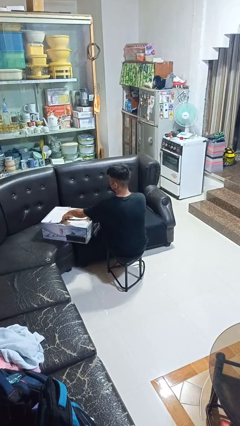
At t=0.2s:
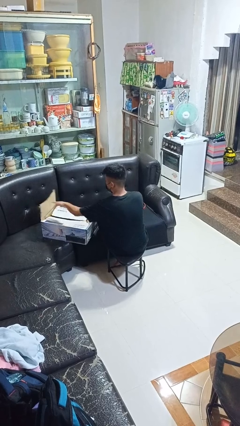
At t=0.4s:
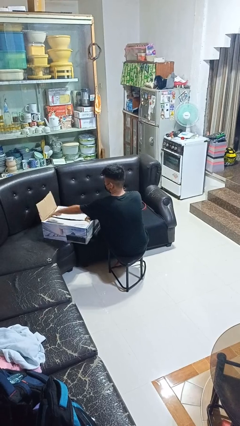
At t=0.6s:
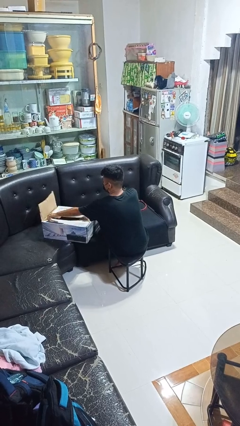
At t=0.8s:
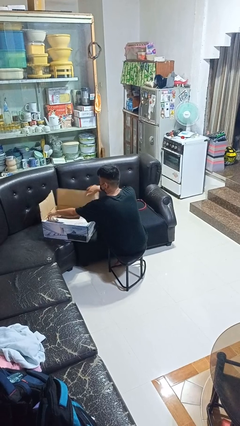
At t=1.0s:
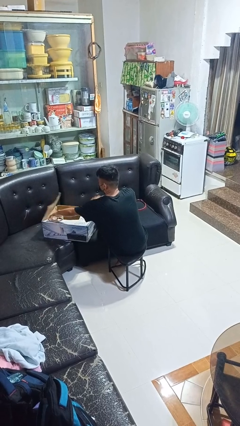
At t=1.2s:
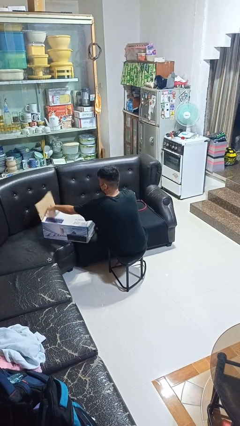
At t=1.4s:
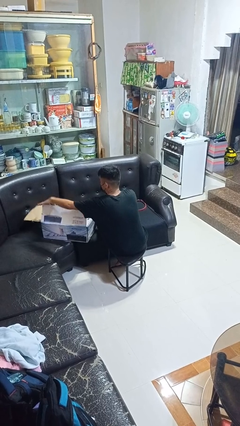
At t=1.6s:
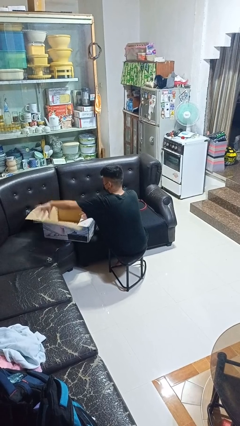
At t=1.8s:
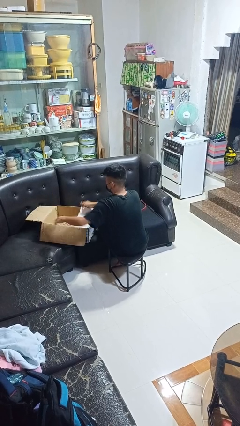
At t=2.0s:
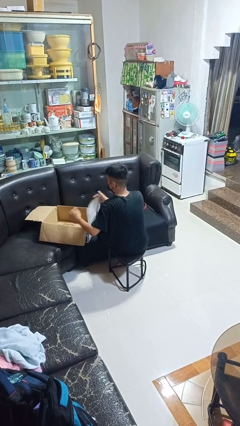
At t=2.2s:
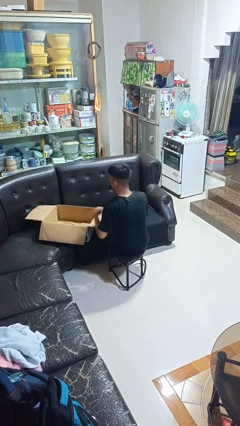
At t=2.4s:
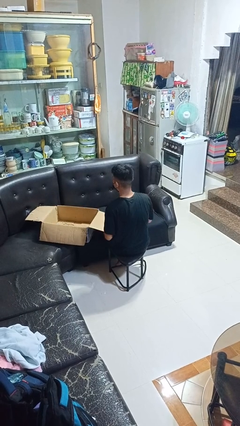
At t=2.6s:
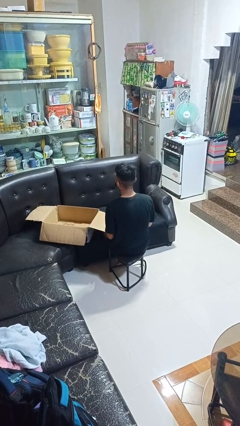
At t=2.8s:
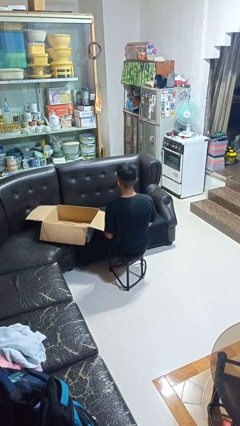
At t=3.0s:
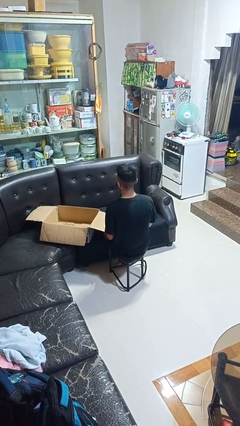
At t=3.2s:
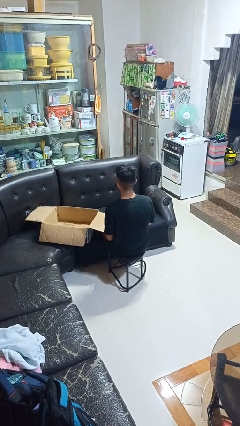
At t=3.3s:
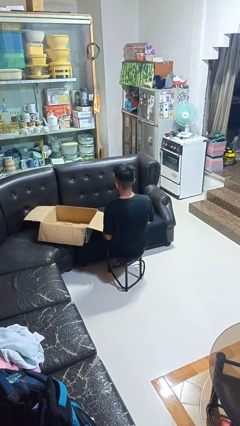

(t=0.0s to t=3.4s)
person opens box

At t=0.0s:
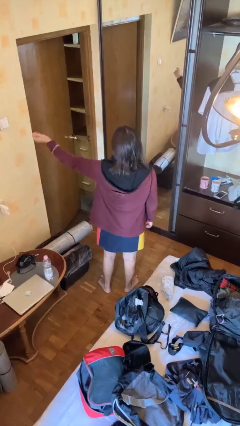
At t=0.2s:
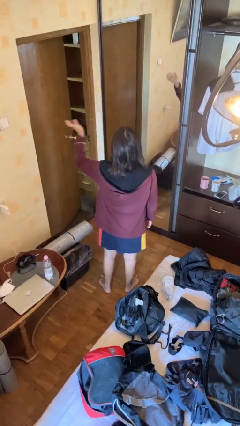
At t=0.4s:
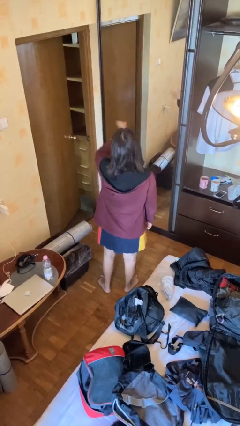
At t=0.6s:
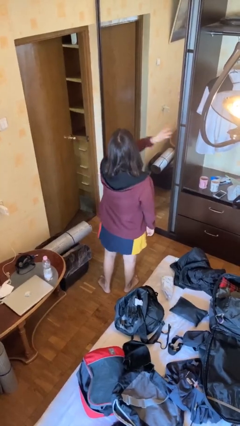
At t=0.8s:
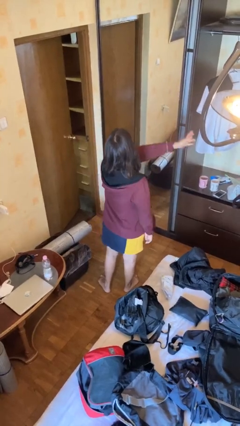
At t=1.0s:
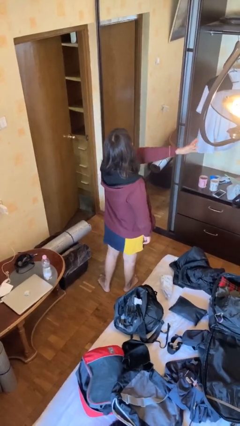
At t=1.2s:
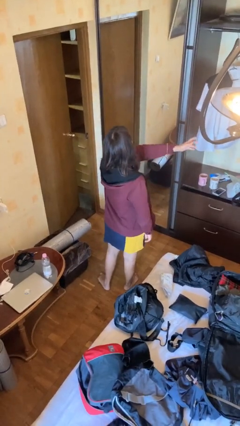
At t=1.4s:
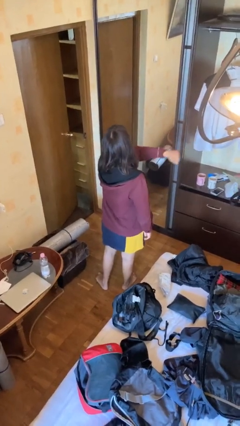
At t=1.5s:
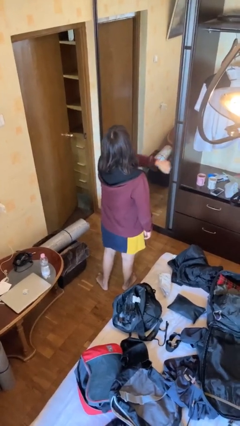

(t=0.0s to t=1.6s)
person gestures swipe right

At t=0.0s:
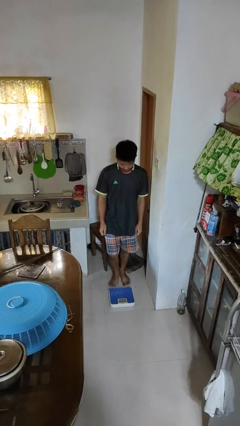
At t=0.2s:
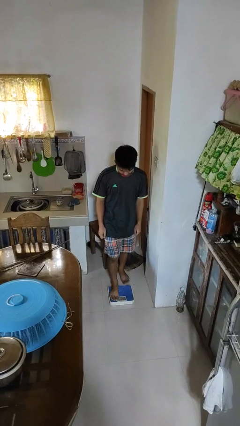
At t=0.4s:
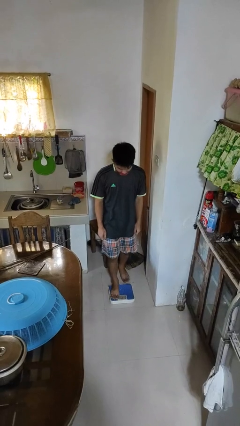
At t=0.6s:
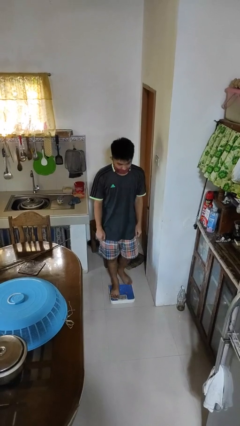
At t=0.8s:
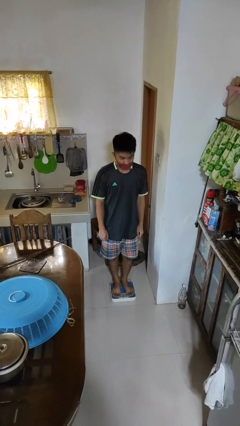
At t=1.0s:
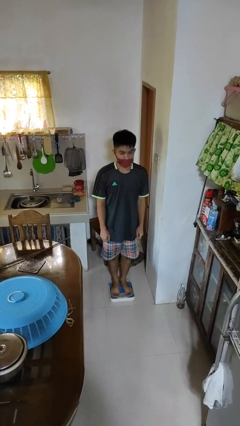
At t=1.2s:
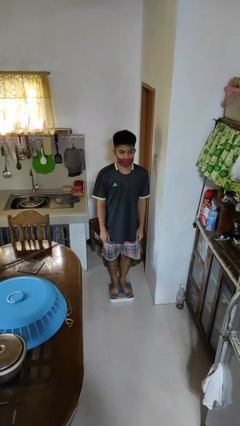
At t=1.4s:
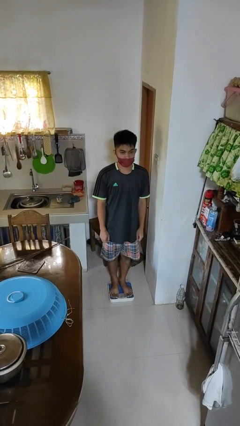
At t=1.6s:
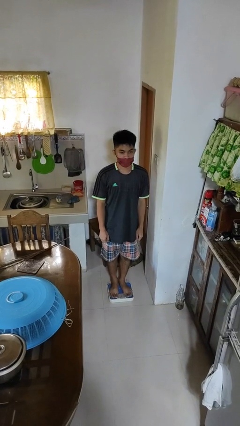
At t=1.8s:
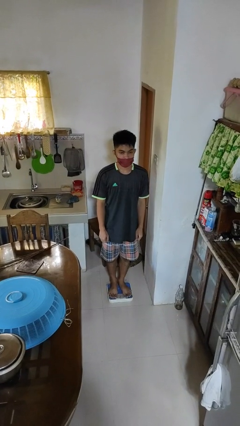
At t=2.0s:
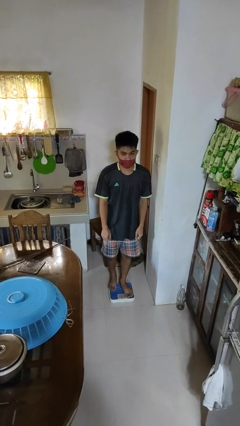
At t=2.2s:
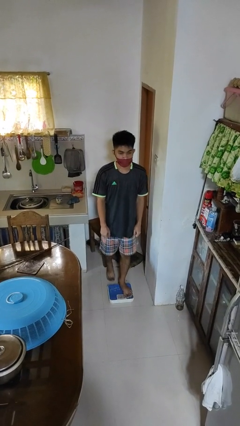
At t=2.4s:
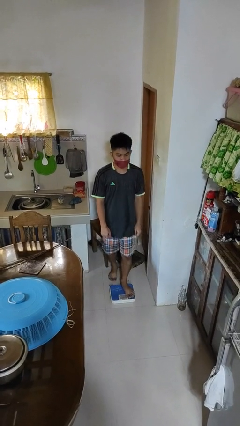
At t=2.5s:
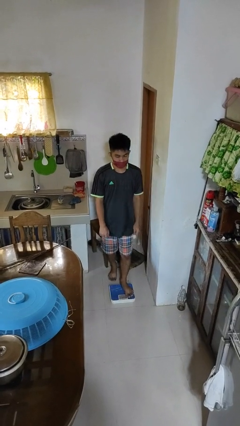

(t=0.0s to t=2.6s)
person uses bodyweight scale

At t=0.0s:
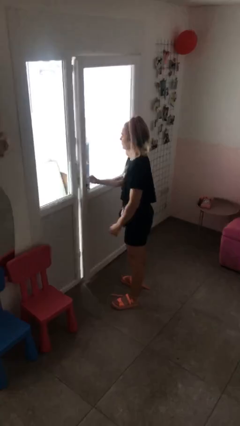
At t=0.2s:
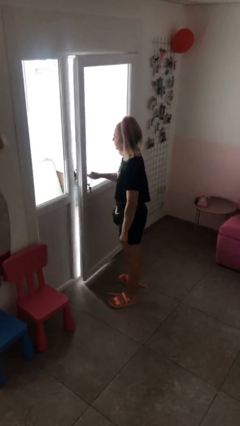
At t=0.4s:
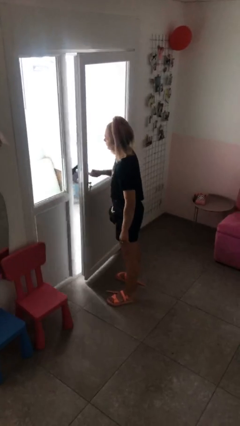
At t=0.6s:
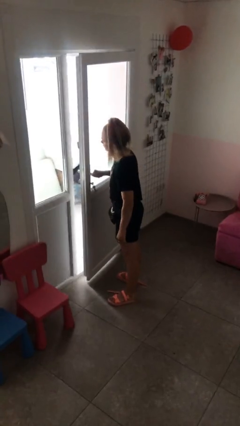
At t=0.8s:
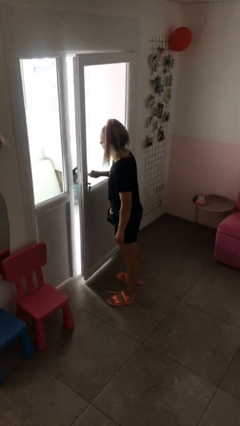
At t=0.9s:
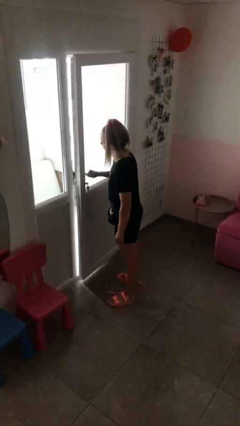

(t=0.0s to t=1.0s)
person opens facility door

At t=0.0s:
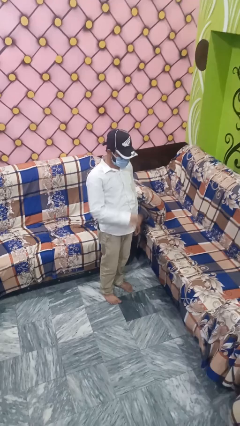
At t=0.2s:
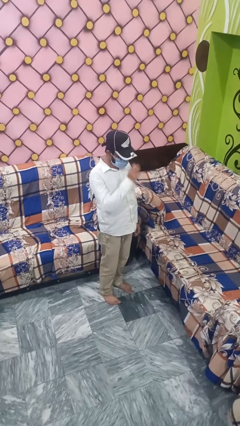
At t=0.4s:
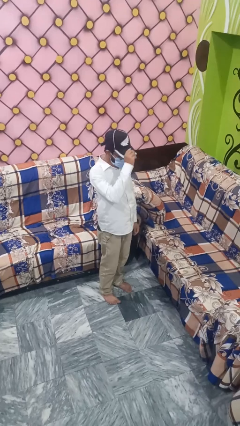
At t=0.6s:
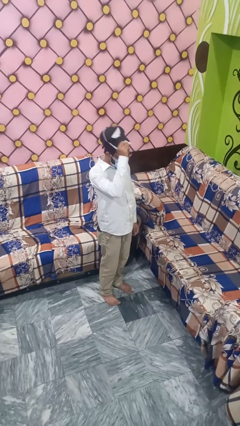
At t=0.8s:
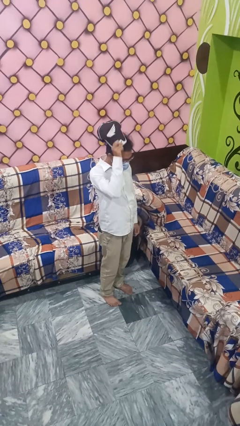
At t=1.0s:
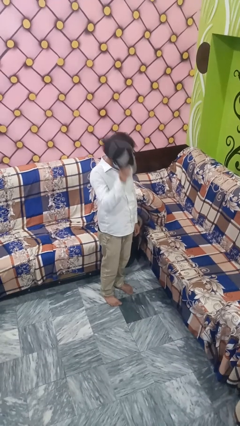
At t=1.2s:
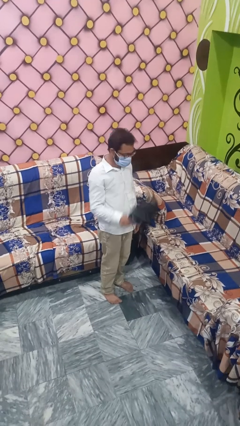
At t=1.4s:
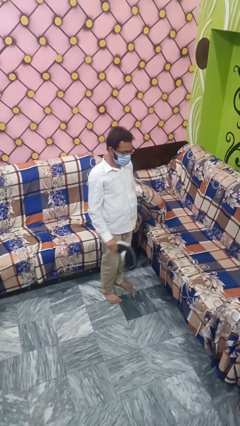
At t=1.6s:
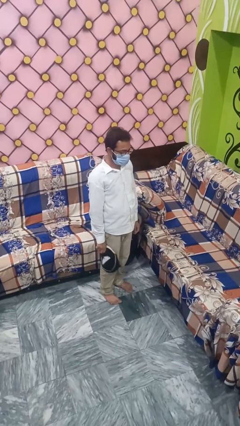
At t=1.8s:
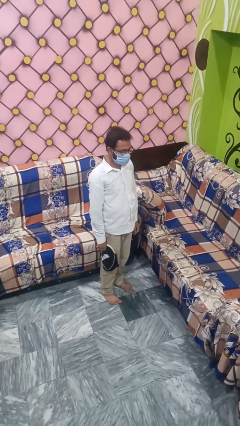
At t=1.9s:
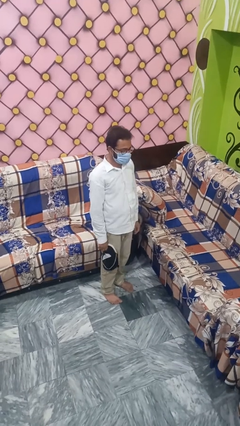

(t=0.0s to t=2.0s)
person takes off hat

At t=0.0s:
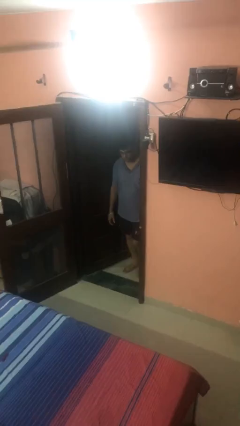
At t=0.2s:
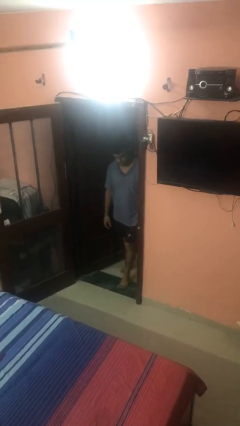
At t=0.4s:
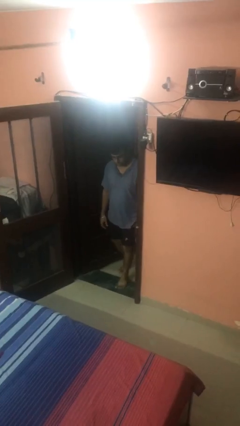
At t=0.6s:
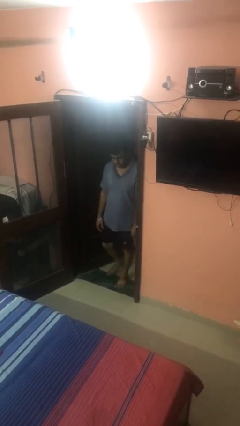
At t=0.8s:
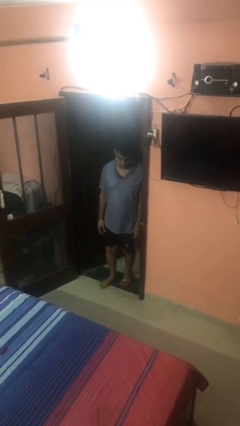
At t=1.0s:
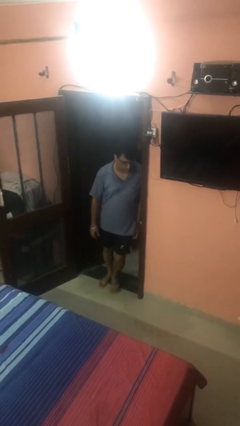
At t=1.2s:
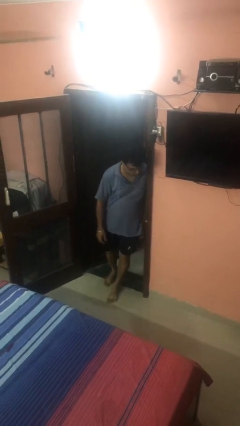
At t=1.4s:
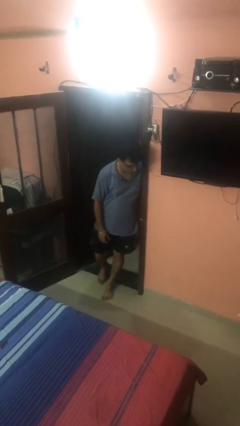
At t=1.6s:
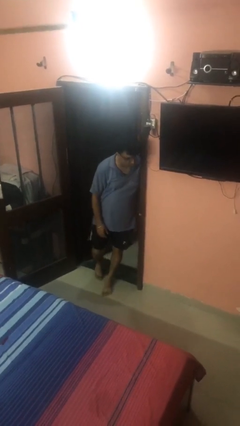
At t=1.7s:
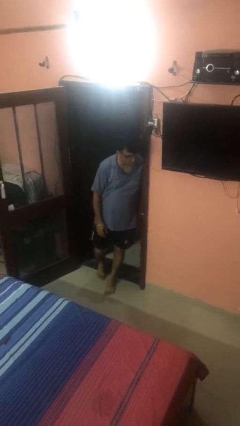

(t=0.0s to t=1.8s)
person bumps into wall

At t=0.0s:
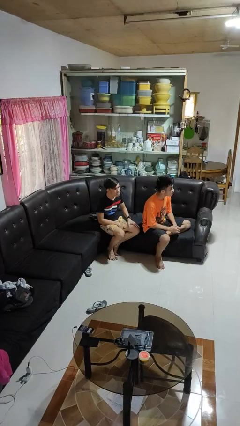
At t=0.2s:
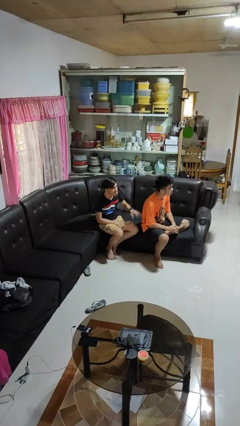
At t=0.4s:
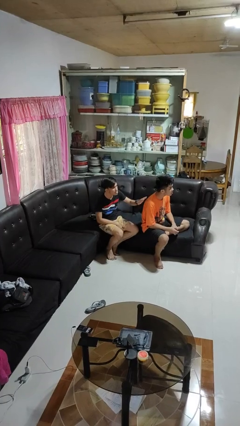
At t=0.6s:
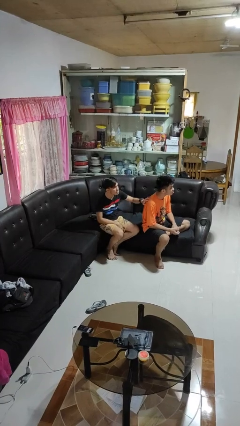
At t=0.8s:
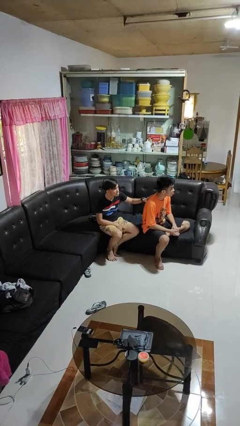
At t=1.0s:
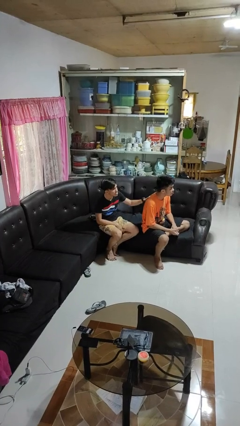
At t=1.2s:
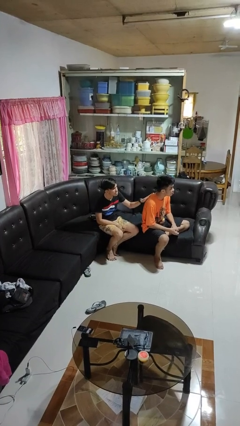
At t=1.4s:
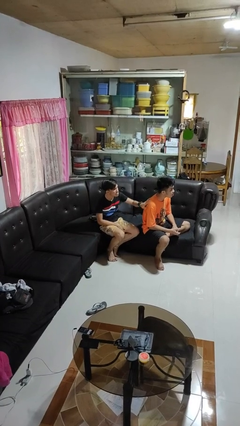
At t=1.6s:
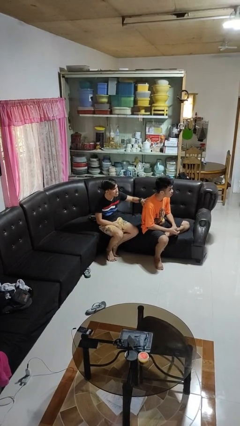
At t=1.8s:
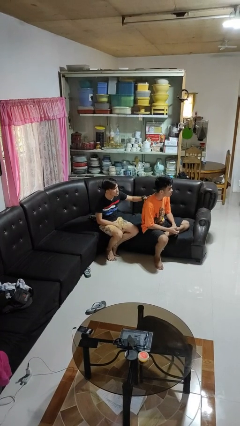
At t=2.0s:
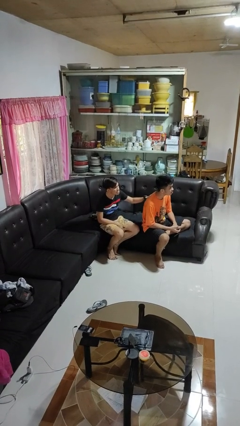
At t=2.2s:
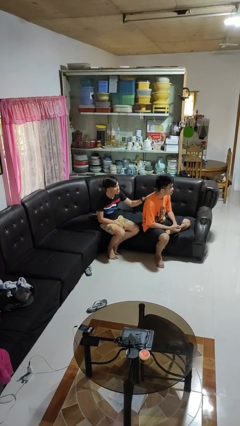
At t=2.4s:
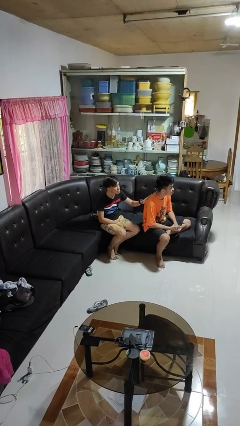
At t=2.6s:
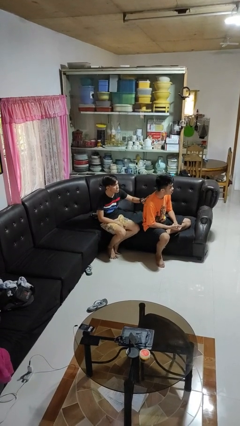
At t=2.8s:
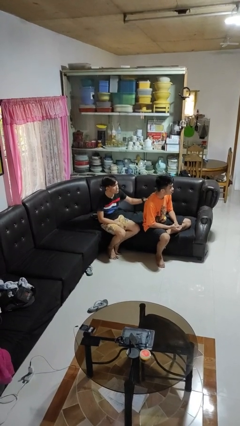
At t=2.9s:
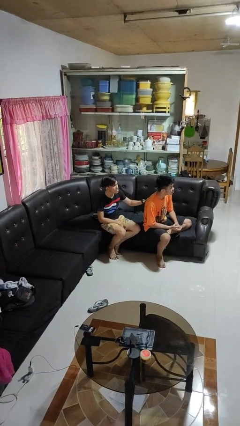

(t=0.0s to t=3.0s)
person touches back of person

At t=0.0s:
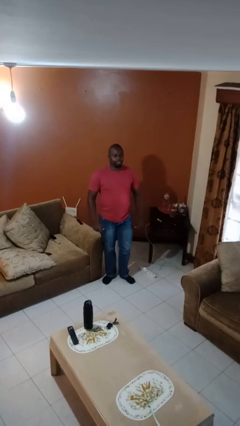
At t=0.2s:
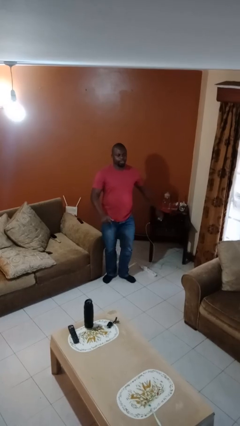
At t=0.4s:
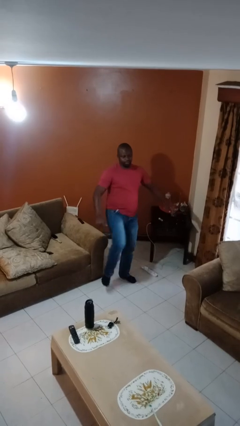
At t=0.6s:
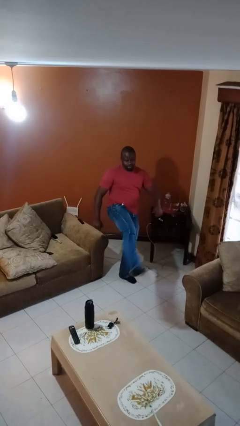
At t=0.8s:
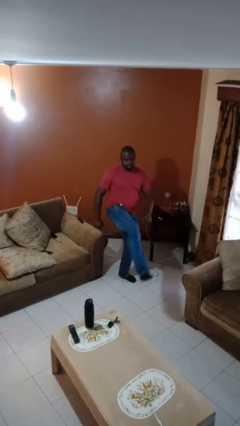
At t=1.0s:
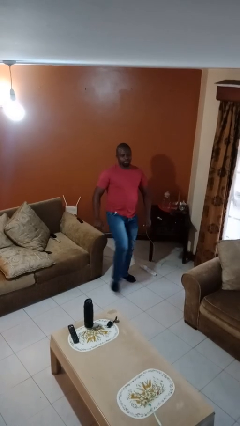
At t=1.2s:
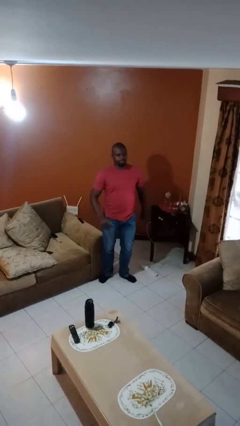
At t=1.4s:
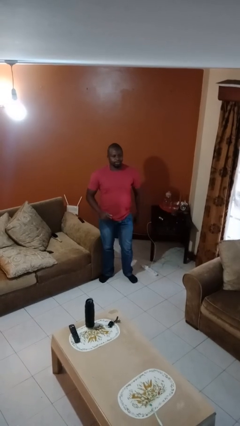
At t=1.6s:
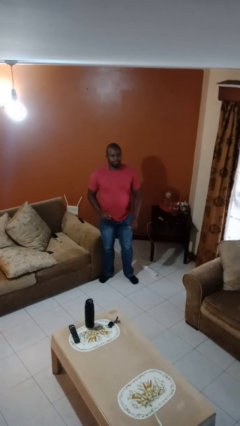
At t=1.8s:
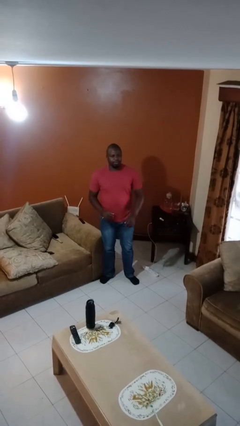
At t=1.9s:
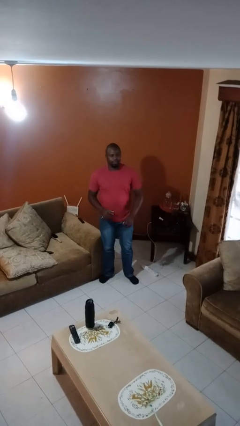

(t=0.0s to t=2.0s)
person karate kicks
